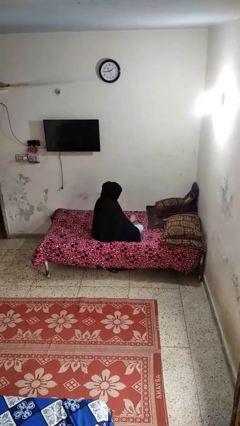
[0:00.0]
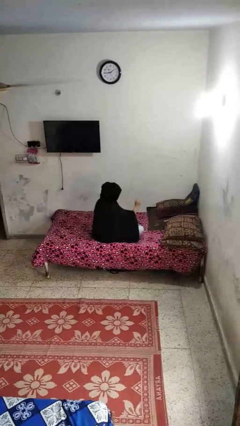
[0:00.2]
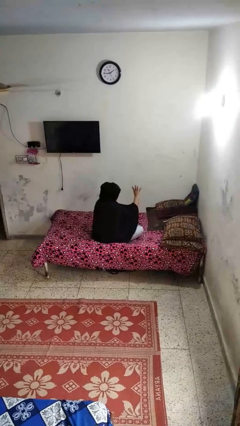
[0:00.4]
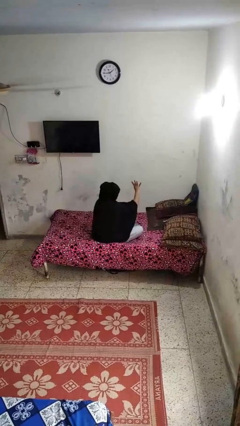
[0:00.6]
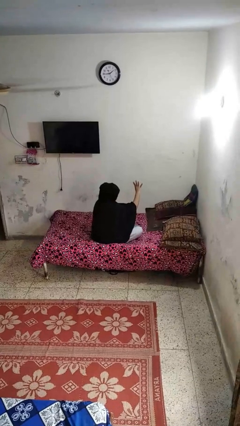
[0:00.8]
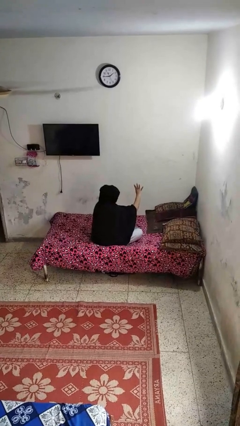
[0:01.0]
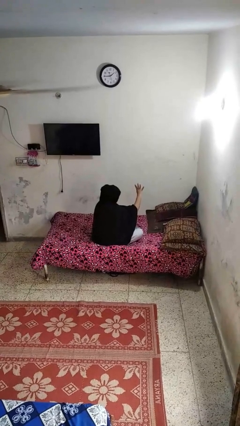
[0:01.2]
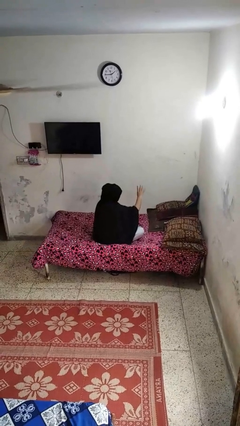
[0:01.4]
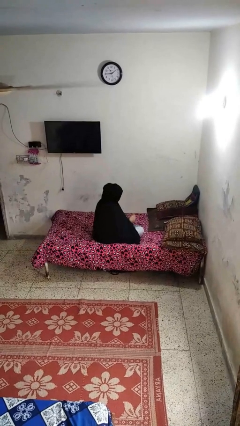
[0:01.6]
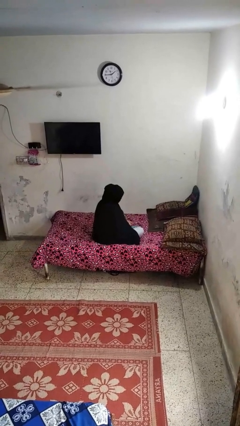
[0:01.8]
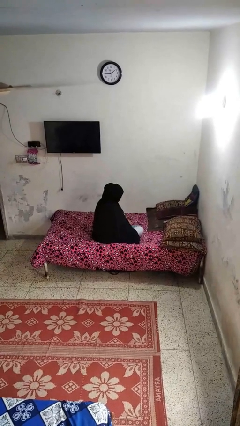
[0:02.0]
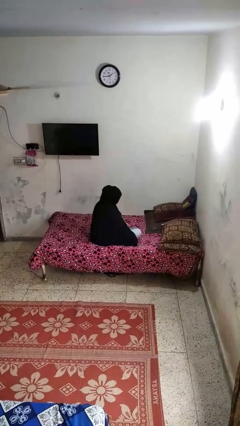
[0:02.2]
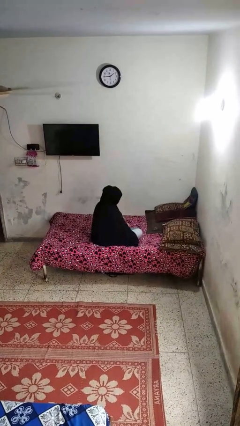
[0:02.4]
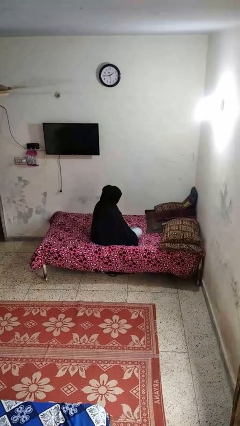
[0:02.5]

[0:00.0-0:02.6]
person gestures number four

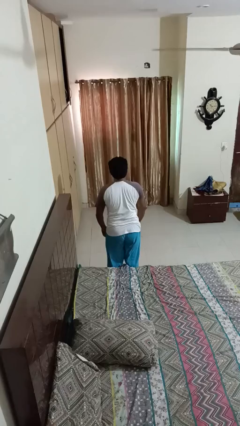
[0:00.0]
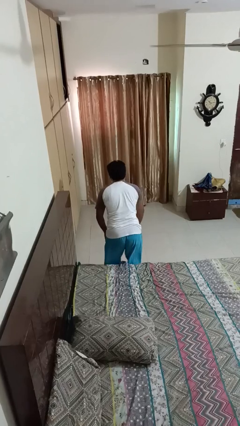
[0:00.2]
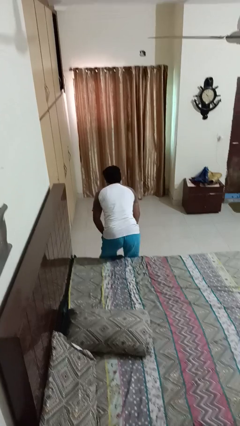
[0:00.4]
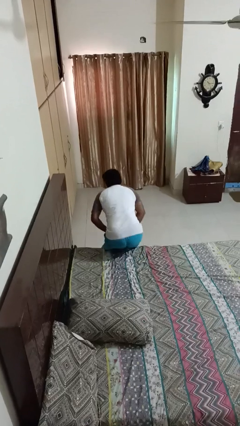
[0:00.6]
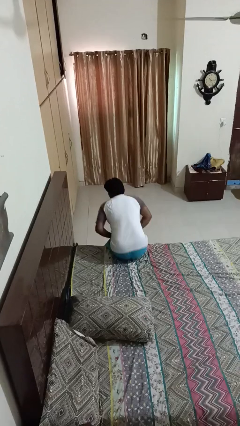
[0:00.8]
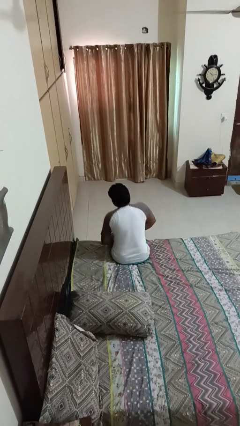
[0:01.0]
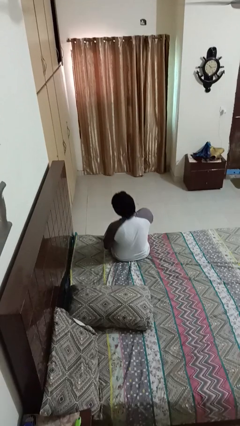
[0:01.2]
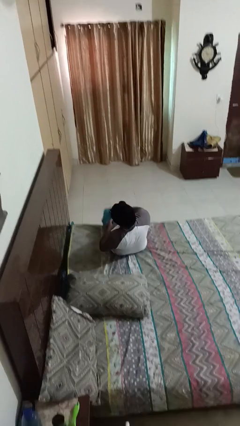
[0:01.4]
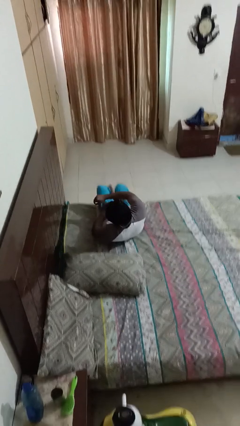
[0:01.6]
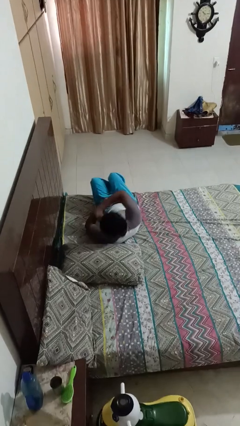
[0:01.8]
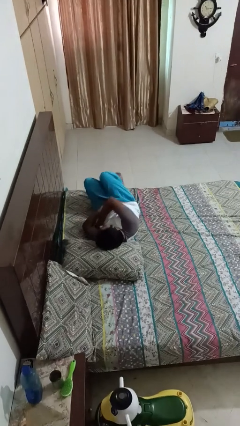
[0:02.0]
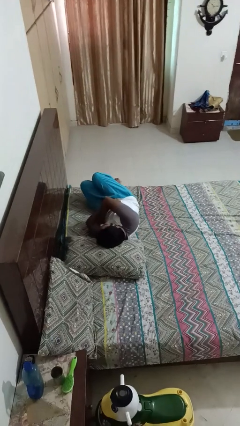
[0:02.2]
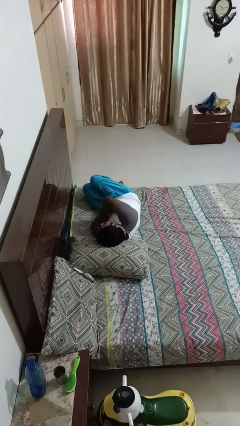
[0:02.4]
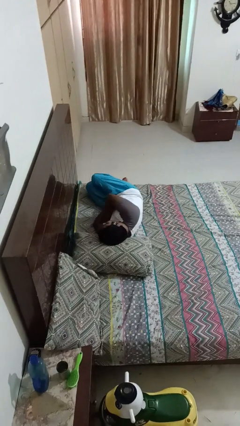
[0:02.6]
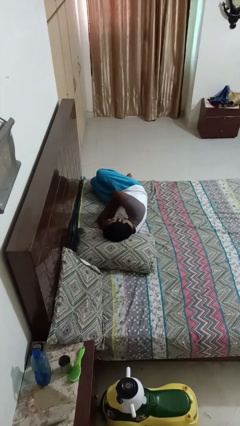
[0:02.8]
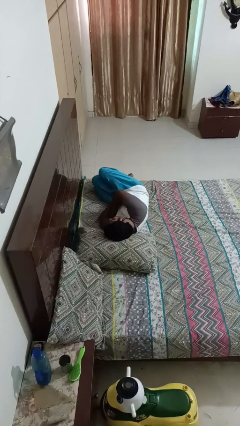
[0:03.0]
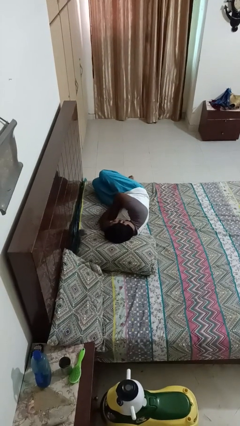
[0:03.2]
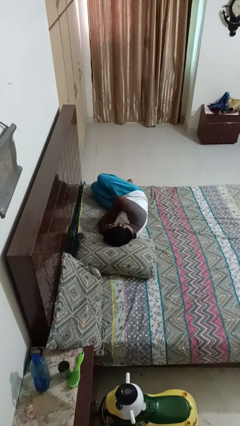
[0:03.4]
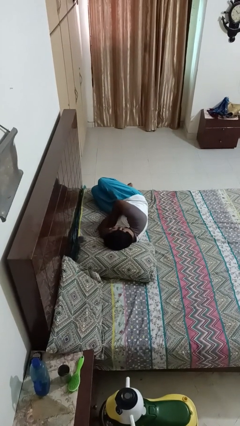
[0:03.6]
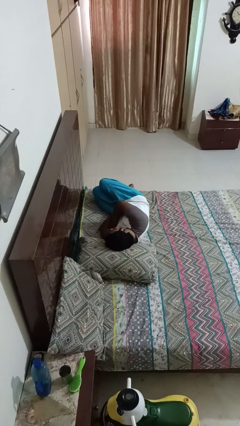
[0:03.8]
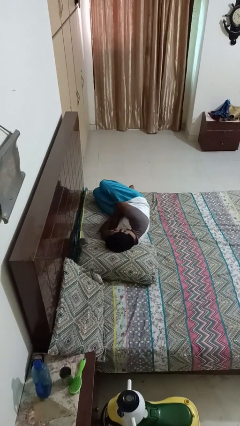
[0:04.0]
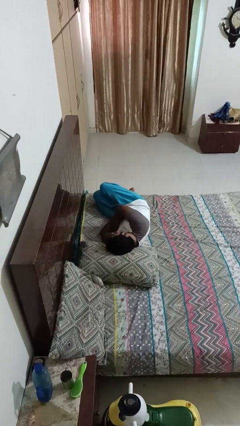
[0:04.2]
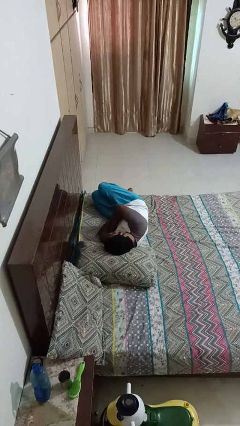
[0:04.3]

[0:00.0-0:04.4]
person lies down on bed

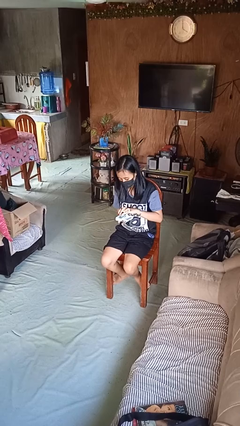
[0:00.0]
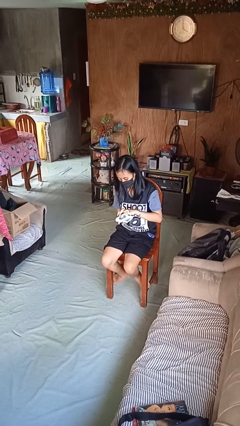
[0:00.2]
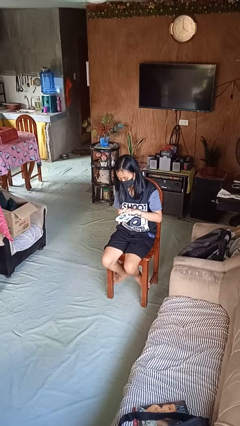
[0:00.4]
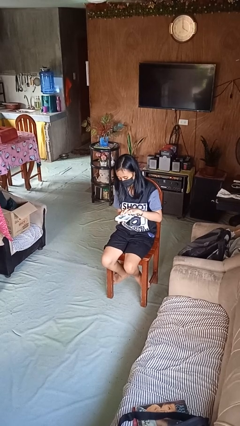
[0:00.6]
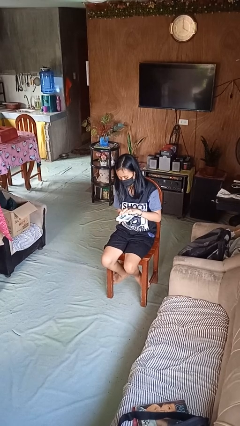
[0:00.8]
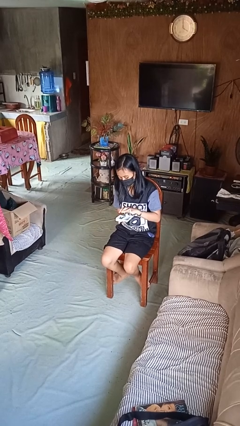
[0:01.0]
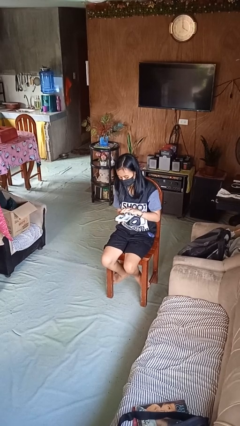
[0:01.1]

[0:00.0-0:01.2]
person searches jewelry box

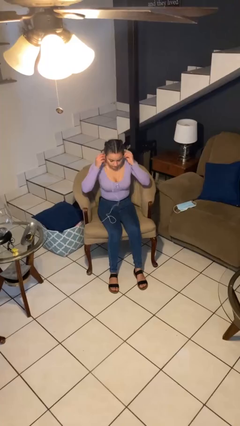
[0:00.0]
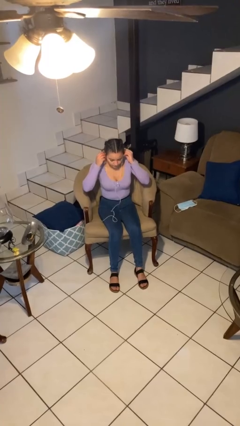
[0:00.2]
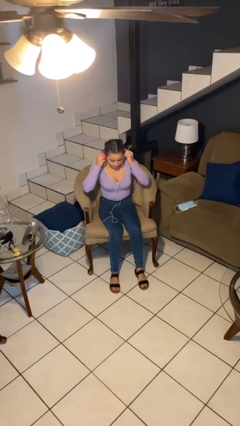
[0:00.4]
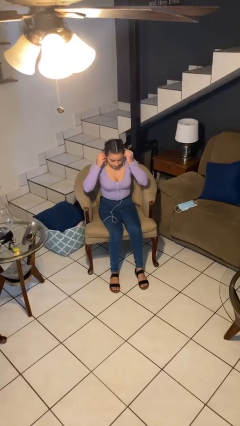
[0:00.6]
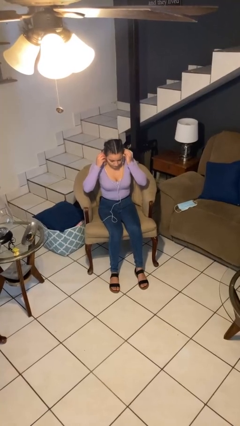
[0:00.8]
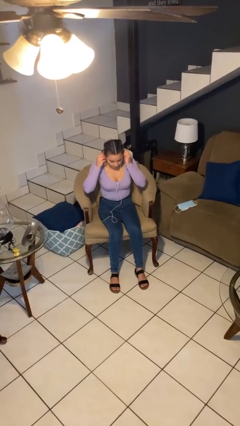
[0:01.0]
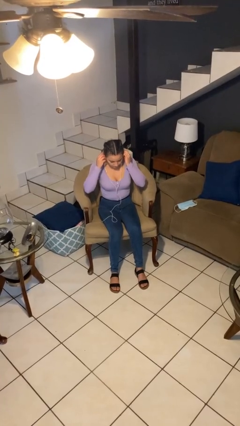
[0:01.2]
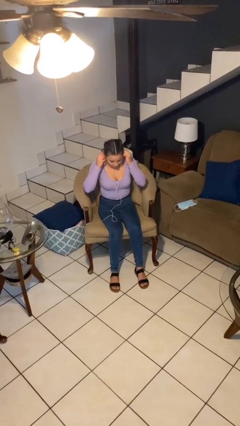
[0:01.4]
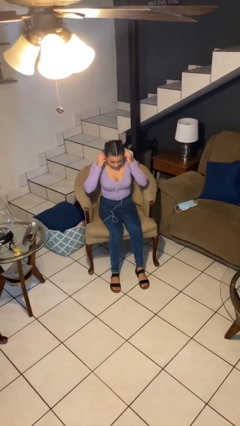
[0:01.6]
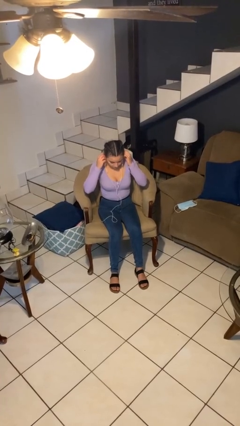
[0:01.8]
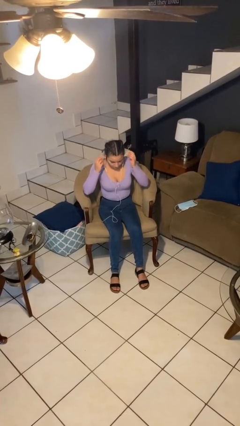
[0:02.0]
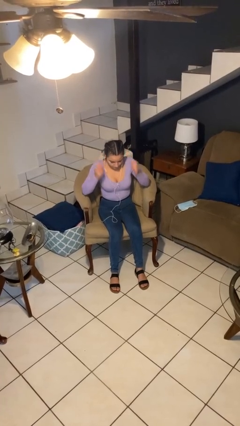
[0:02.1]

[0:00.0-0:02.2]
person puts on headphones

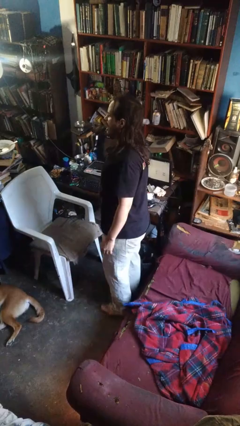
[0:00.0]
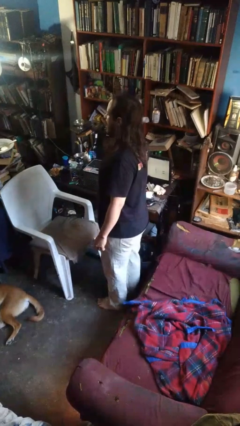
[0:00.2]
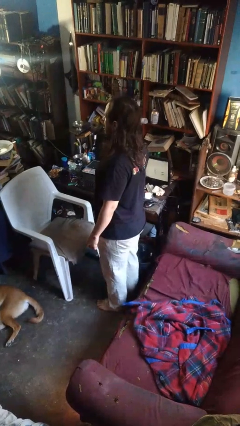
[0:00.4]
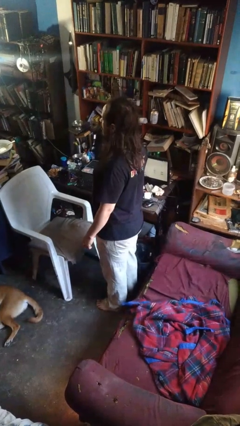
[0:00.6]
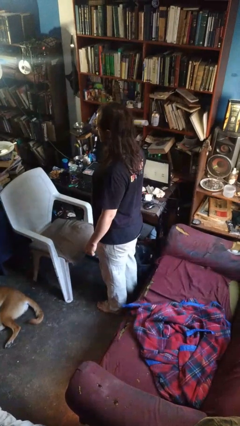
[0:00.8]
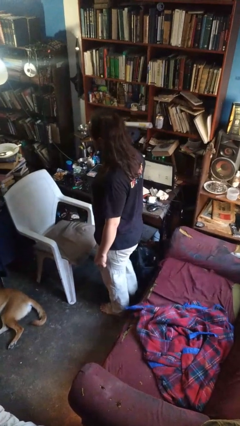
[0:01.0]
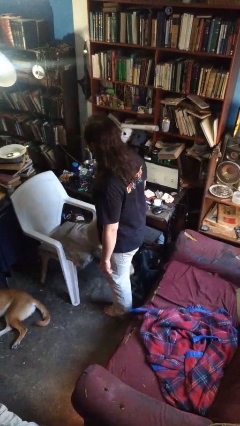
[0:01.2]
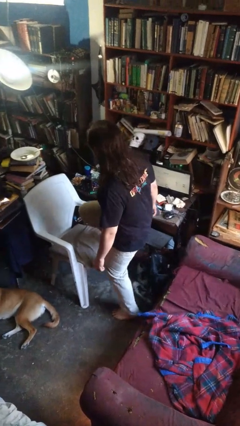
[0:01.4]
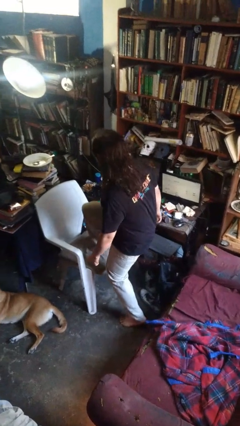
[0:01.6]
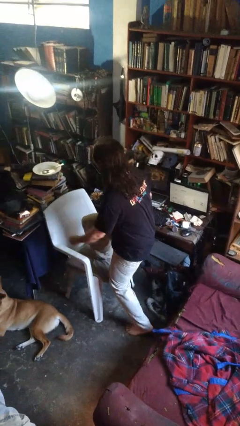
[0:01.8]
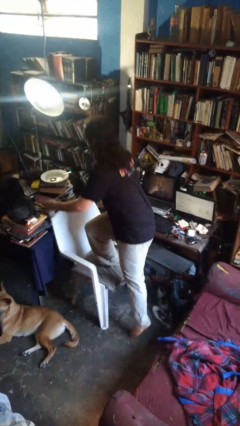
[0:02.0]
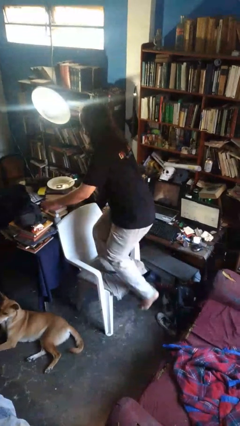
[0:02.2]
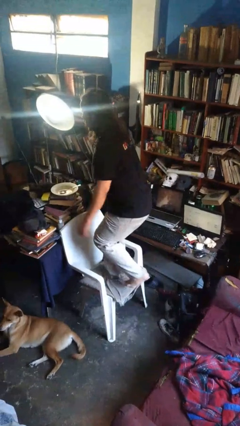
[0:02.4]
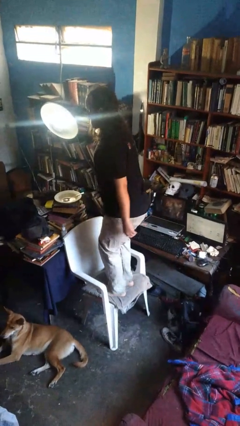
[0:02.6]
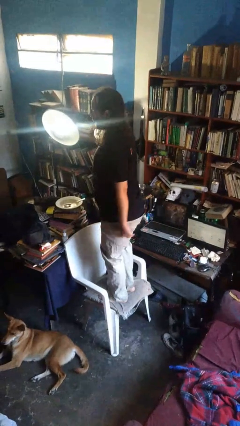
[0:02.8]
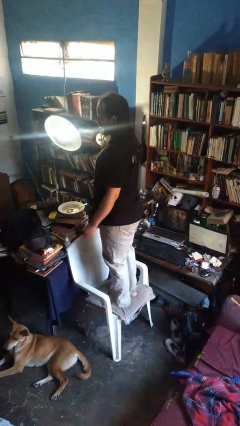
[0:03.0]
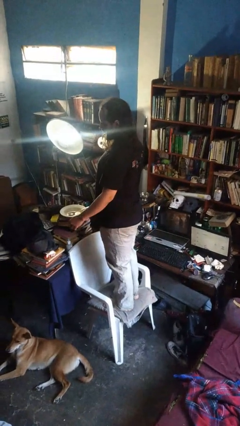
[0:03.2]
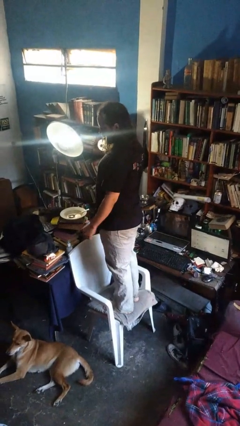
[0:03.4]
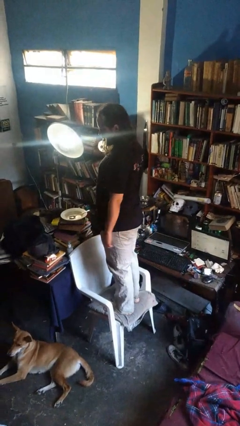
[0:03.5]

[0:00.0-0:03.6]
person climbs on chair

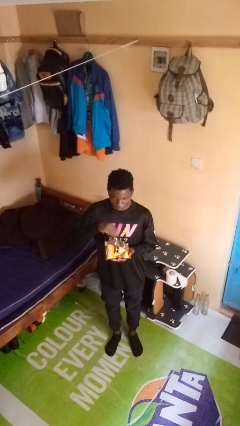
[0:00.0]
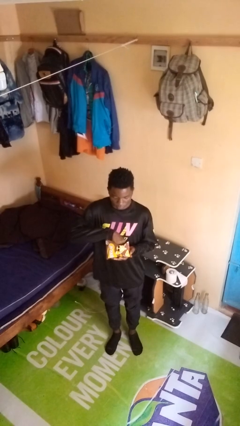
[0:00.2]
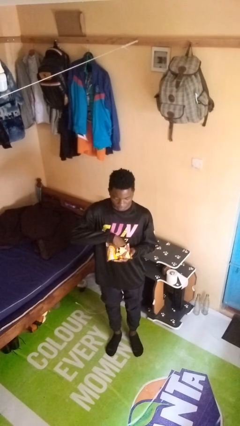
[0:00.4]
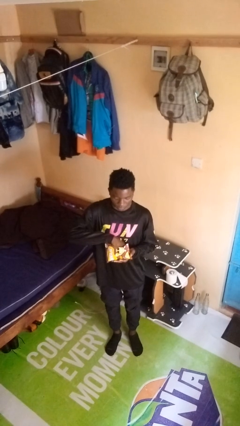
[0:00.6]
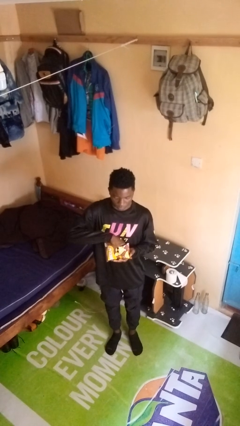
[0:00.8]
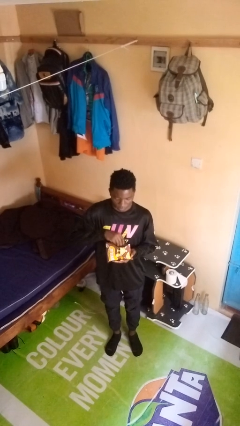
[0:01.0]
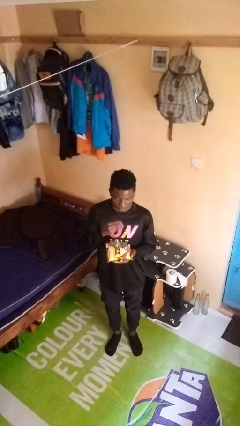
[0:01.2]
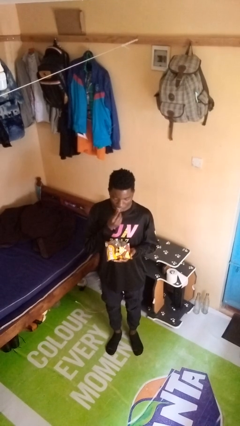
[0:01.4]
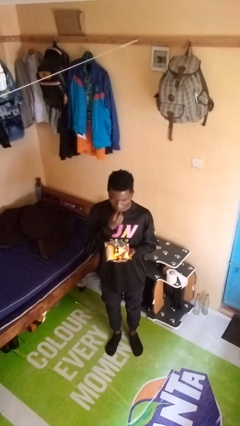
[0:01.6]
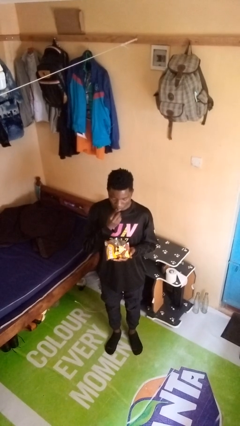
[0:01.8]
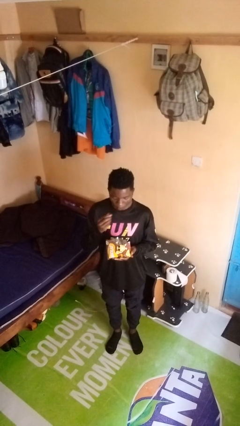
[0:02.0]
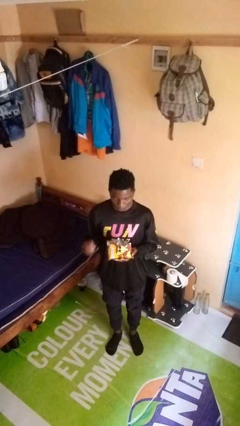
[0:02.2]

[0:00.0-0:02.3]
person eats snack from bag

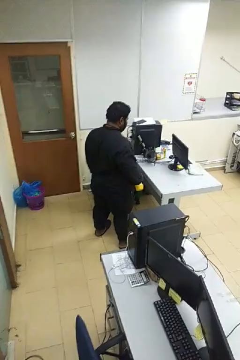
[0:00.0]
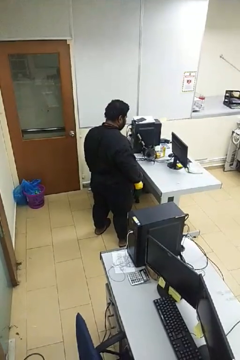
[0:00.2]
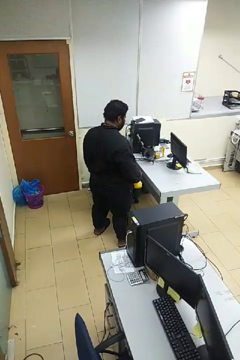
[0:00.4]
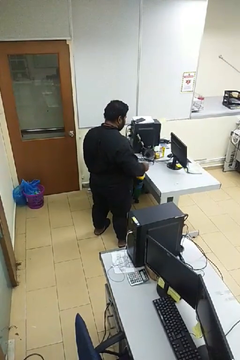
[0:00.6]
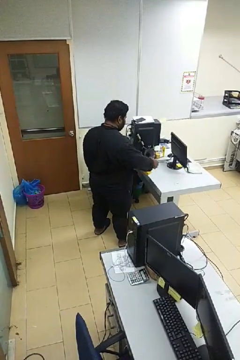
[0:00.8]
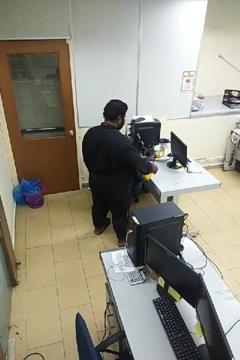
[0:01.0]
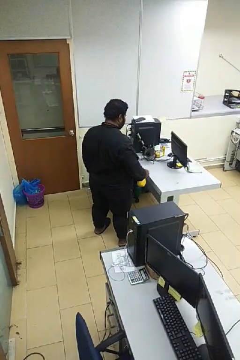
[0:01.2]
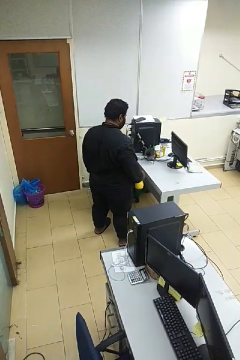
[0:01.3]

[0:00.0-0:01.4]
person sprays from bottle
